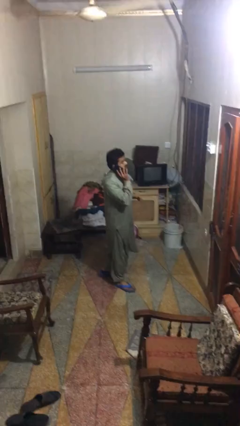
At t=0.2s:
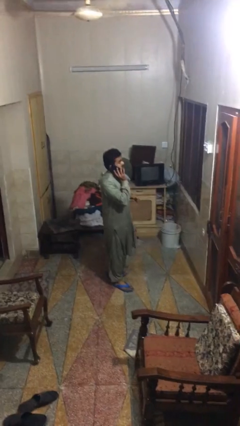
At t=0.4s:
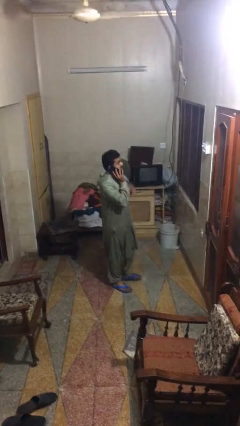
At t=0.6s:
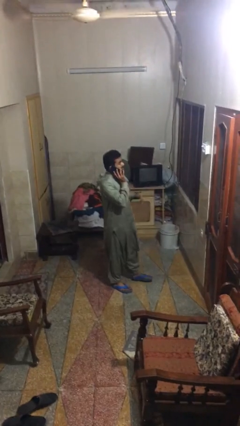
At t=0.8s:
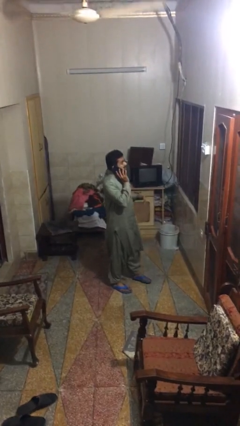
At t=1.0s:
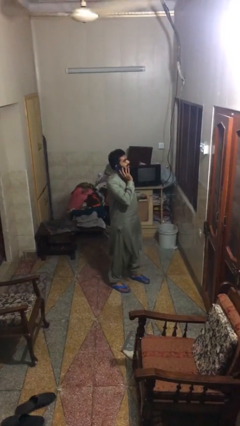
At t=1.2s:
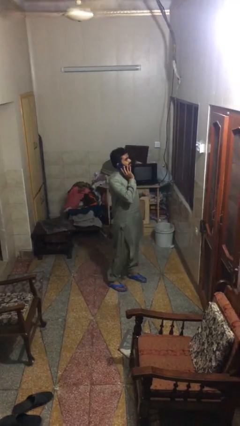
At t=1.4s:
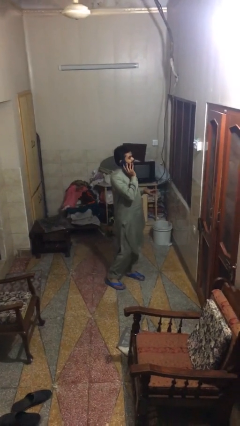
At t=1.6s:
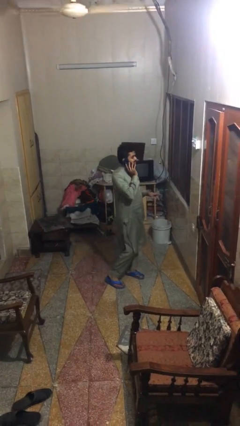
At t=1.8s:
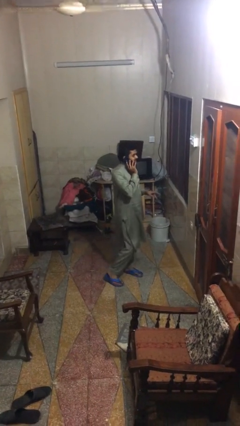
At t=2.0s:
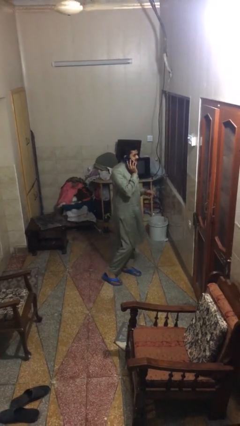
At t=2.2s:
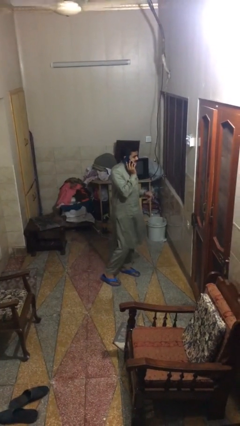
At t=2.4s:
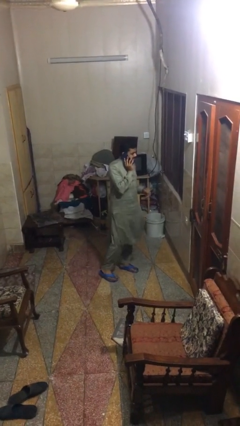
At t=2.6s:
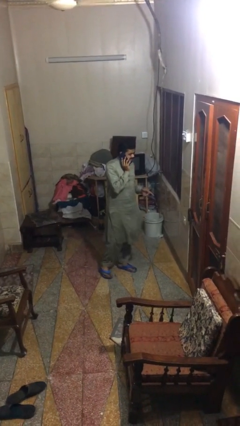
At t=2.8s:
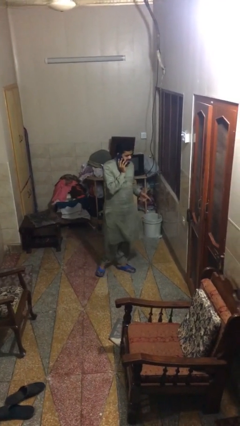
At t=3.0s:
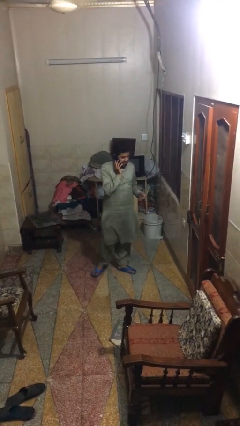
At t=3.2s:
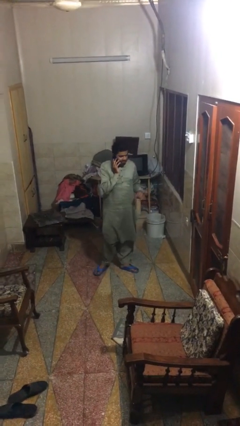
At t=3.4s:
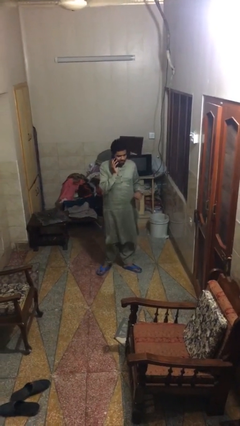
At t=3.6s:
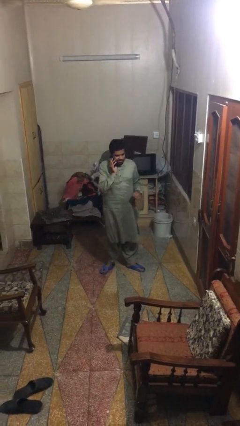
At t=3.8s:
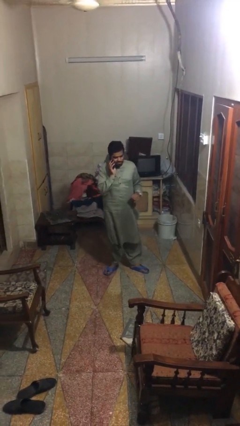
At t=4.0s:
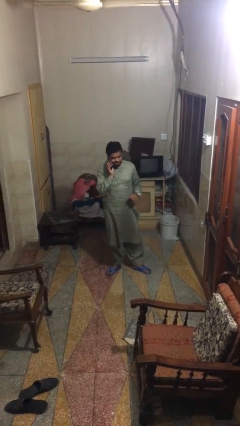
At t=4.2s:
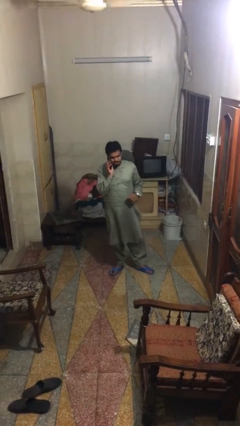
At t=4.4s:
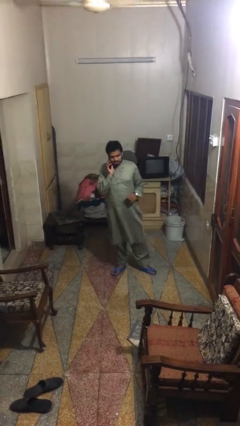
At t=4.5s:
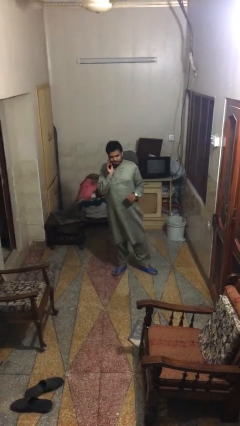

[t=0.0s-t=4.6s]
person talks on phone
